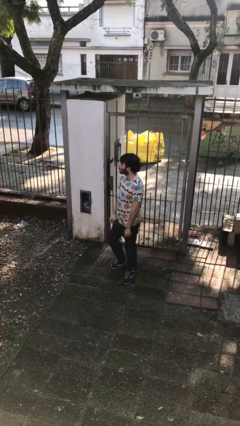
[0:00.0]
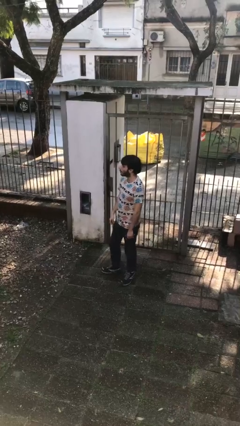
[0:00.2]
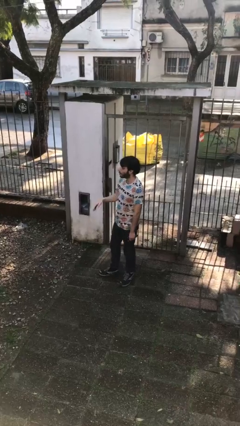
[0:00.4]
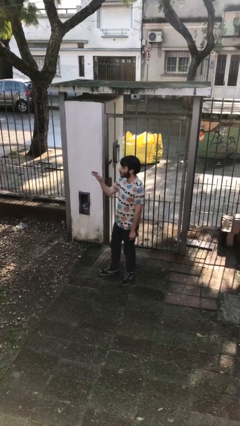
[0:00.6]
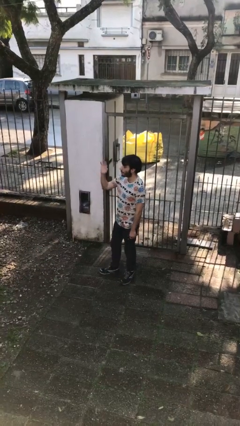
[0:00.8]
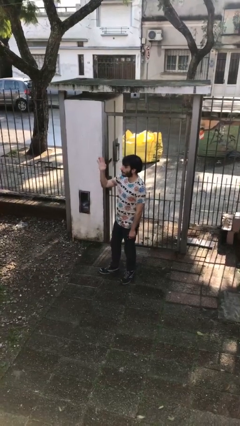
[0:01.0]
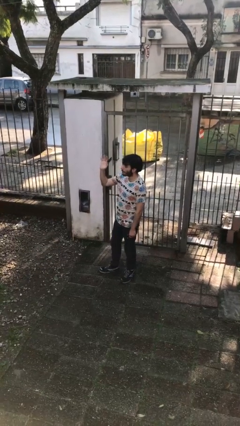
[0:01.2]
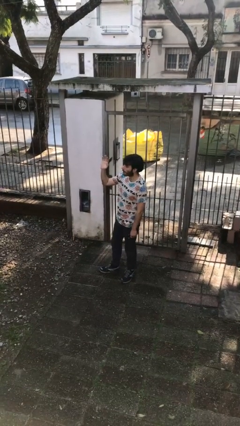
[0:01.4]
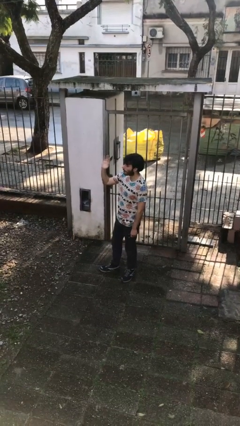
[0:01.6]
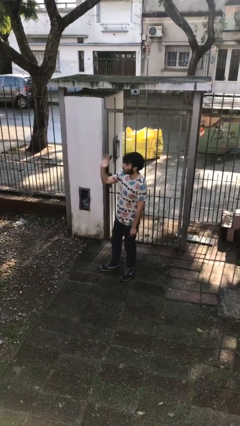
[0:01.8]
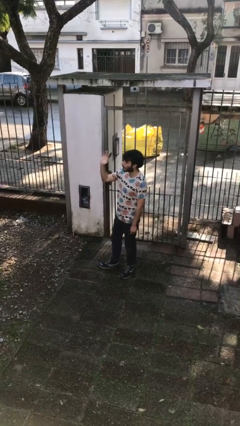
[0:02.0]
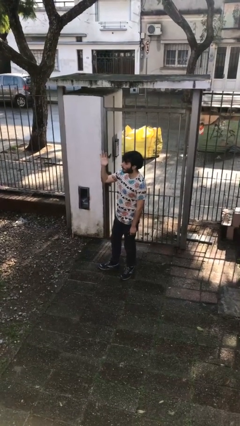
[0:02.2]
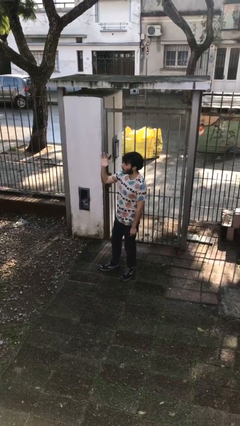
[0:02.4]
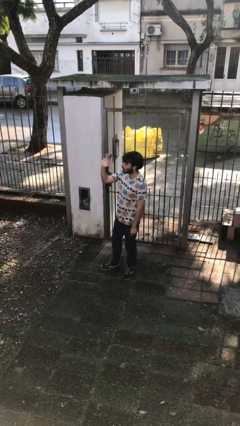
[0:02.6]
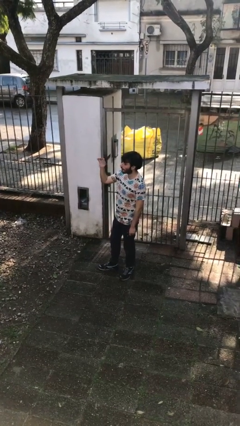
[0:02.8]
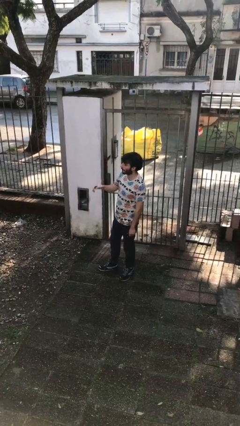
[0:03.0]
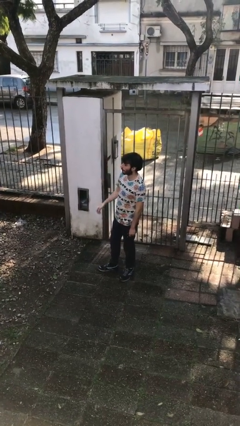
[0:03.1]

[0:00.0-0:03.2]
person waves at person

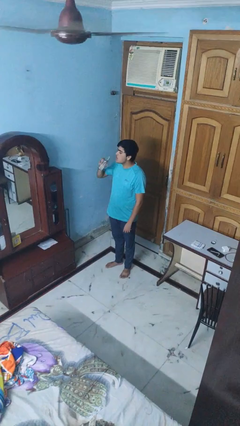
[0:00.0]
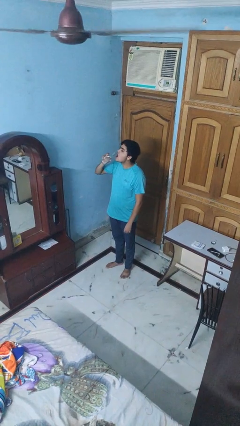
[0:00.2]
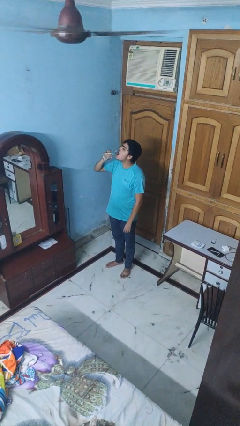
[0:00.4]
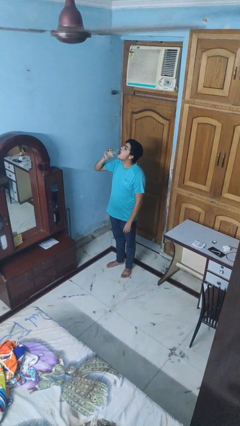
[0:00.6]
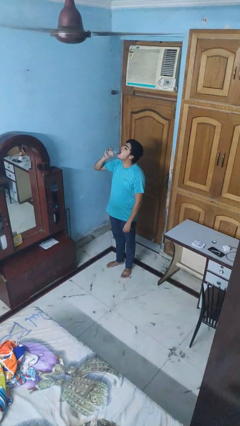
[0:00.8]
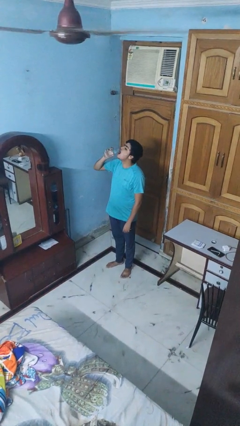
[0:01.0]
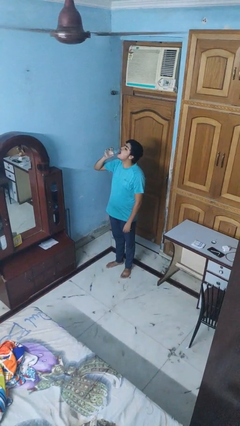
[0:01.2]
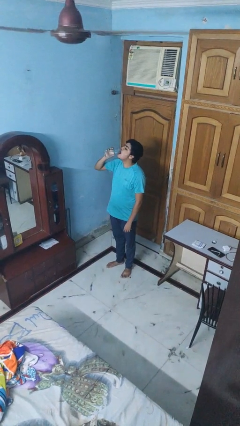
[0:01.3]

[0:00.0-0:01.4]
person drinks from bottle

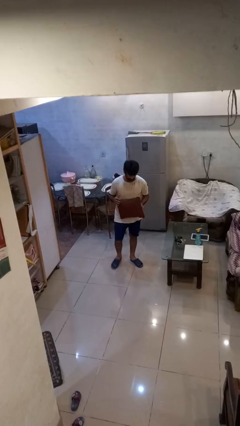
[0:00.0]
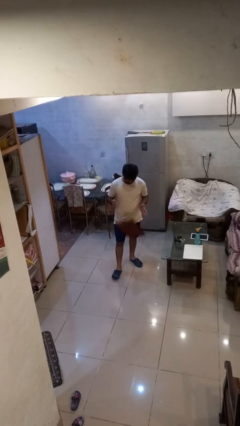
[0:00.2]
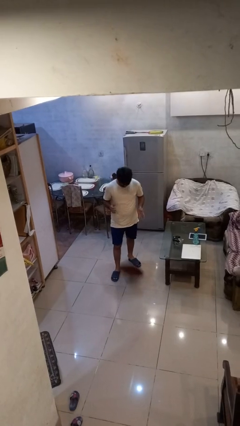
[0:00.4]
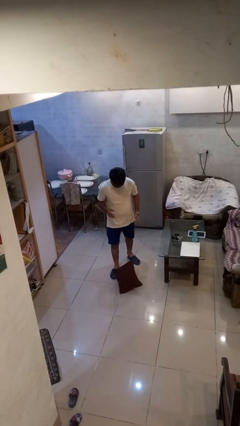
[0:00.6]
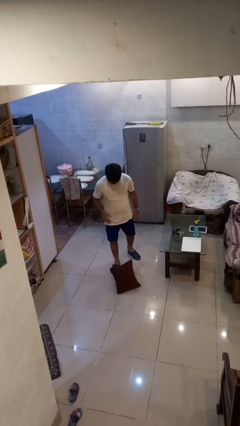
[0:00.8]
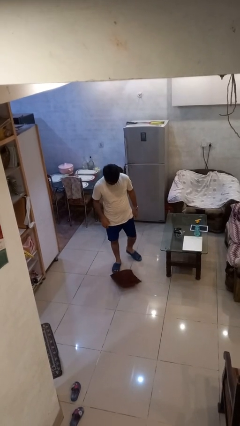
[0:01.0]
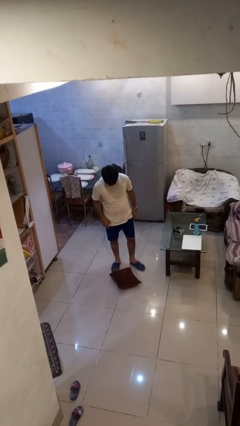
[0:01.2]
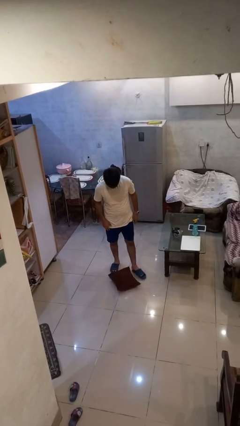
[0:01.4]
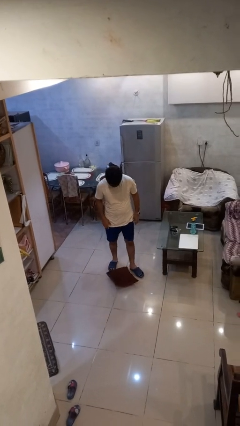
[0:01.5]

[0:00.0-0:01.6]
person drops object

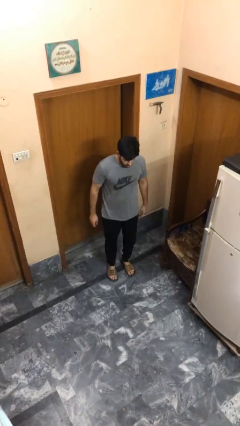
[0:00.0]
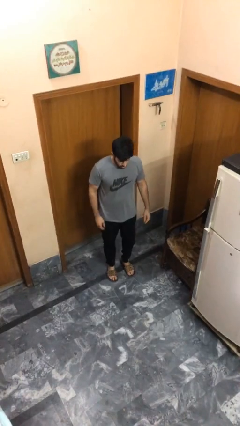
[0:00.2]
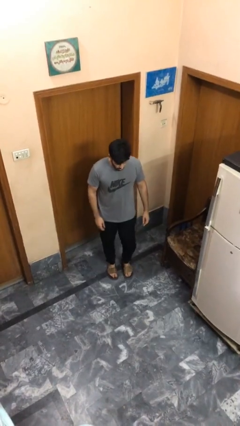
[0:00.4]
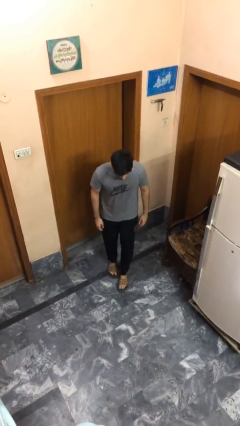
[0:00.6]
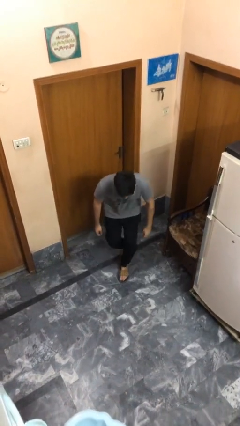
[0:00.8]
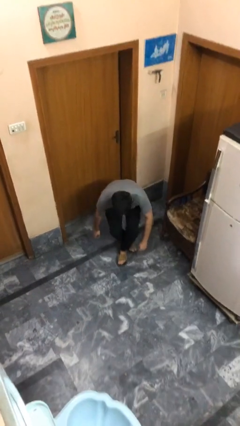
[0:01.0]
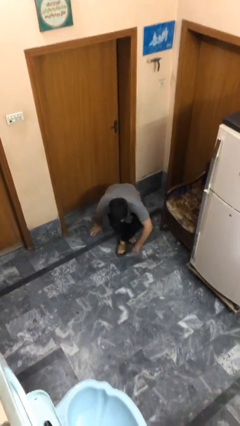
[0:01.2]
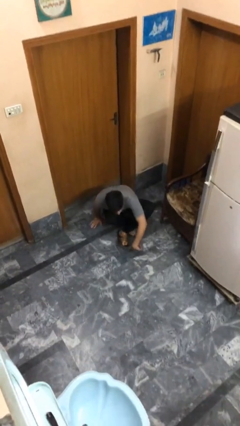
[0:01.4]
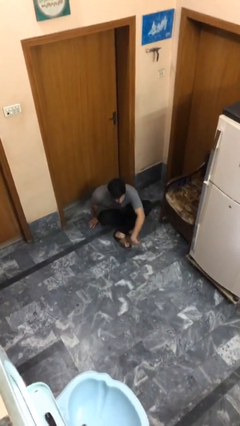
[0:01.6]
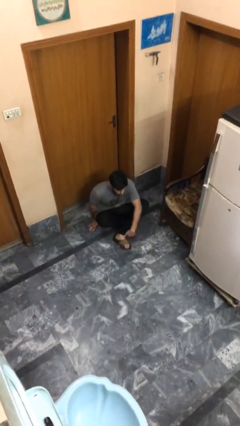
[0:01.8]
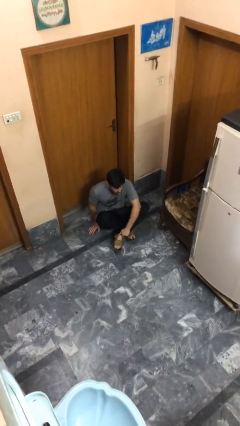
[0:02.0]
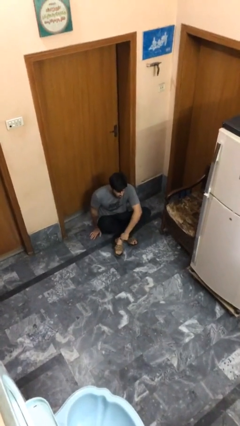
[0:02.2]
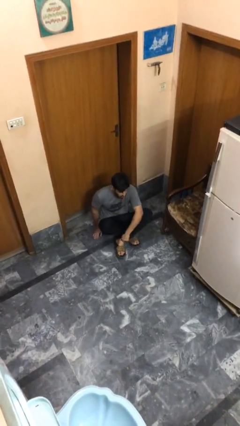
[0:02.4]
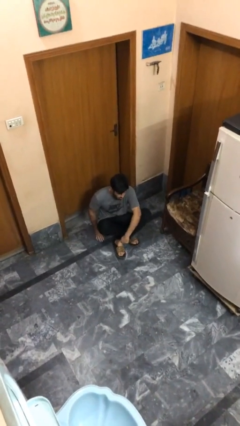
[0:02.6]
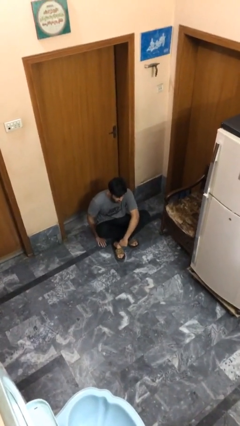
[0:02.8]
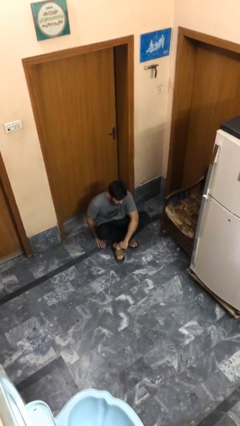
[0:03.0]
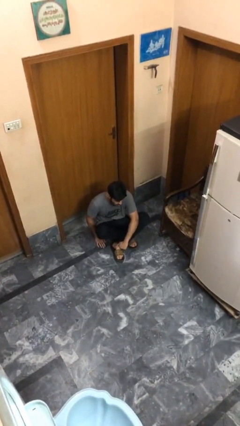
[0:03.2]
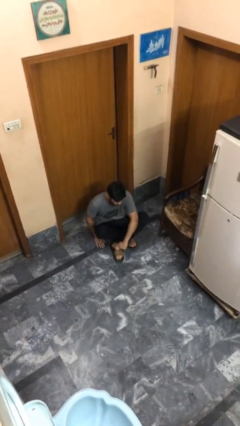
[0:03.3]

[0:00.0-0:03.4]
person sits crisscross

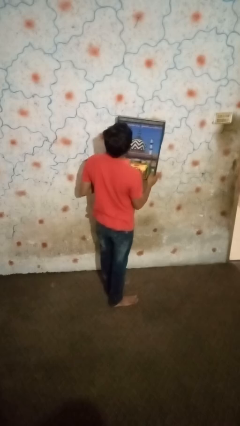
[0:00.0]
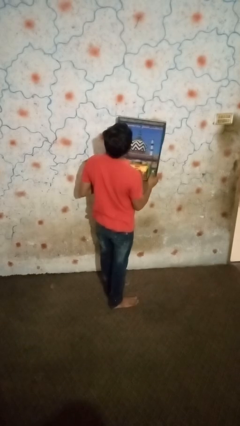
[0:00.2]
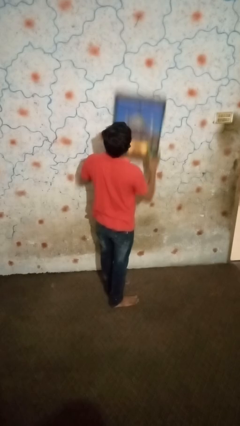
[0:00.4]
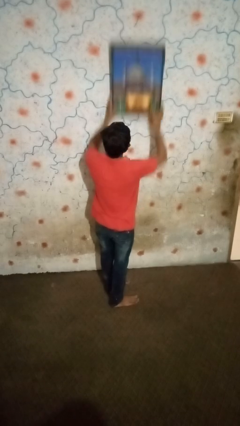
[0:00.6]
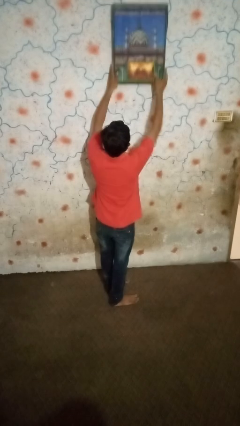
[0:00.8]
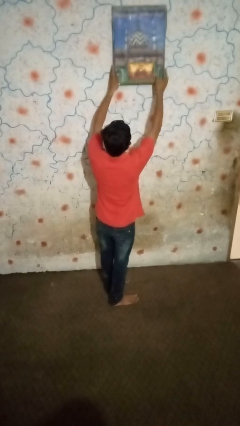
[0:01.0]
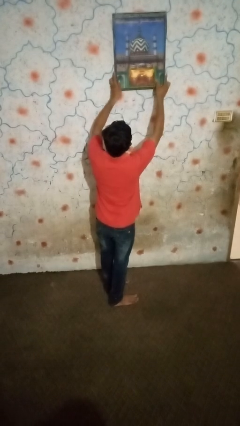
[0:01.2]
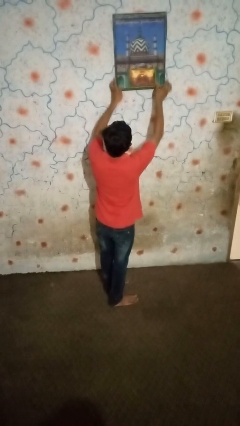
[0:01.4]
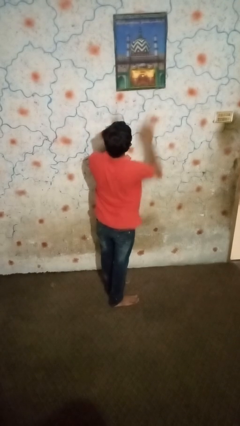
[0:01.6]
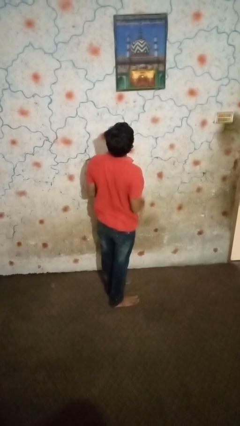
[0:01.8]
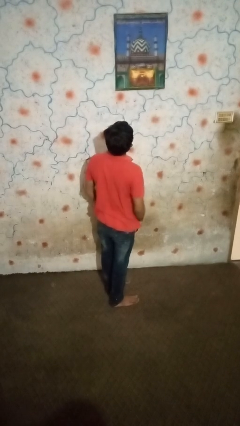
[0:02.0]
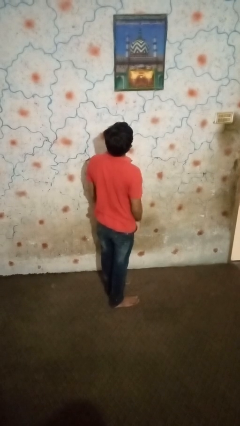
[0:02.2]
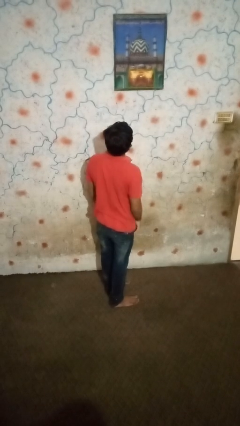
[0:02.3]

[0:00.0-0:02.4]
person puts up picture frame

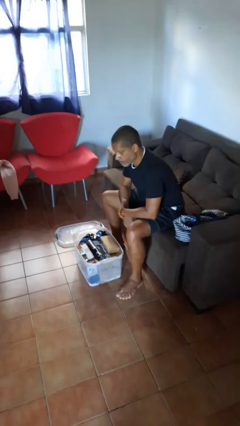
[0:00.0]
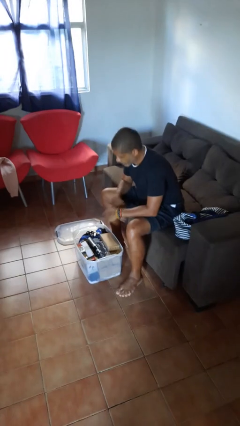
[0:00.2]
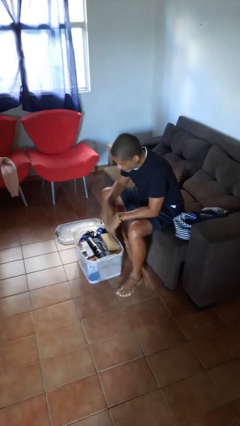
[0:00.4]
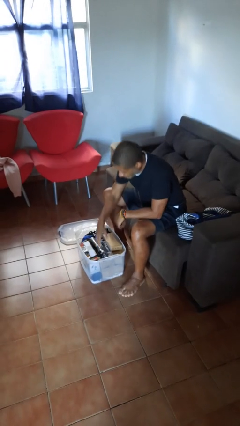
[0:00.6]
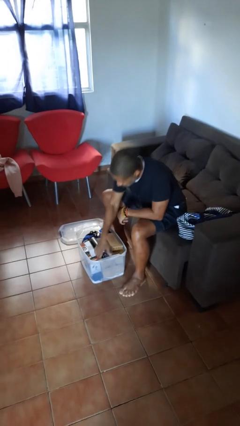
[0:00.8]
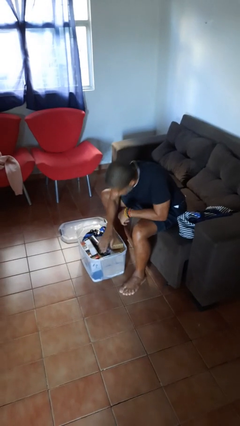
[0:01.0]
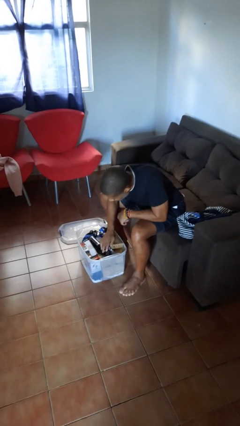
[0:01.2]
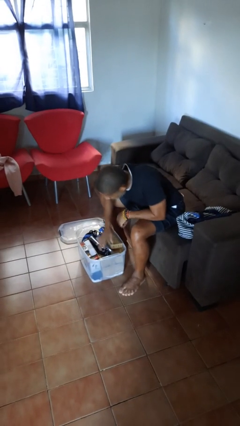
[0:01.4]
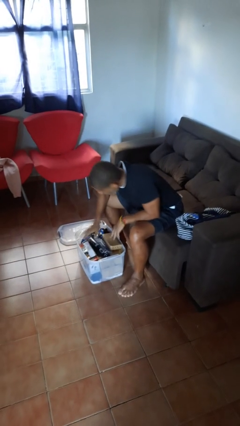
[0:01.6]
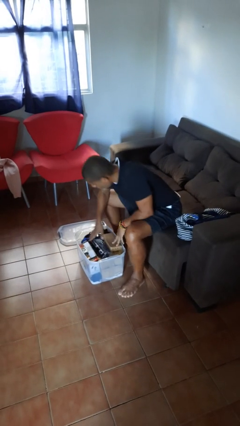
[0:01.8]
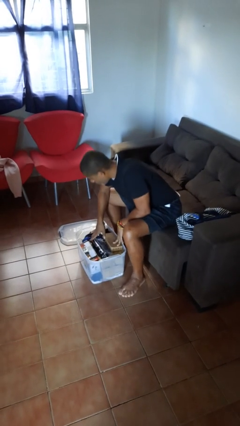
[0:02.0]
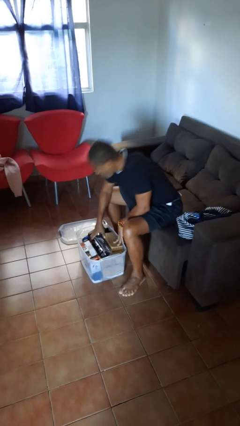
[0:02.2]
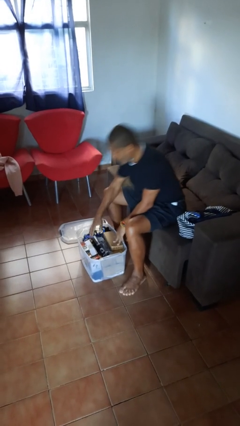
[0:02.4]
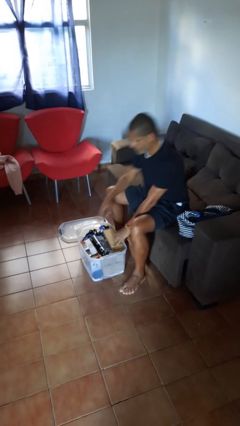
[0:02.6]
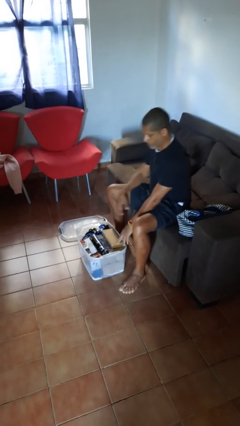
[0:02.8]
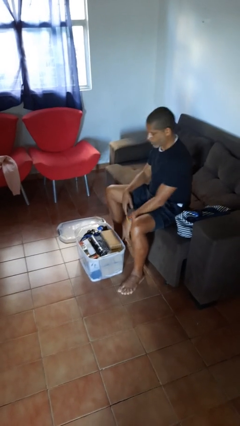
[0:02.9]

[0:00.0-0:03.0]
person searches in box

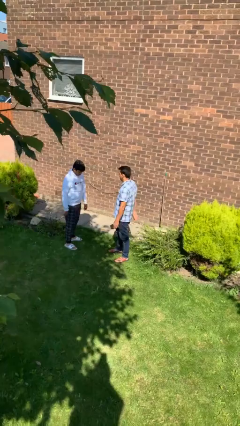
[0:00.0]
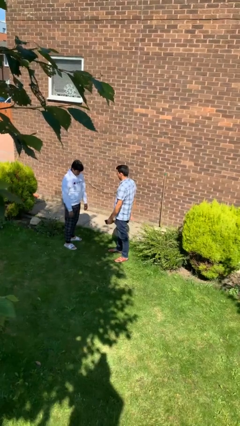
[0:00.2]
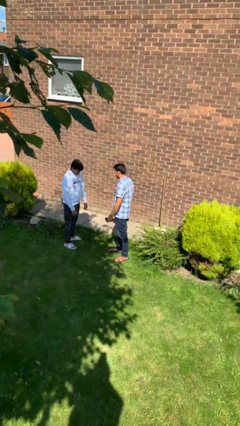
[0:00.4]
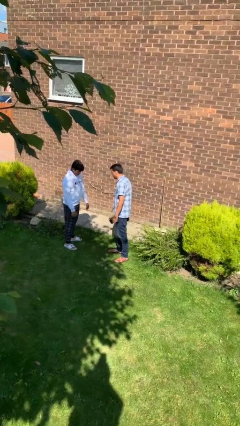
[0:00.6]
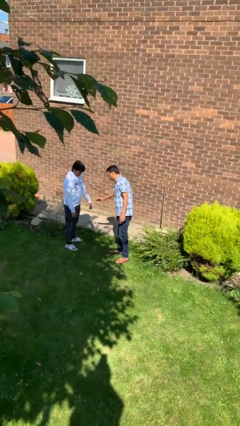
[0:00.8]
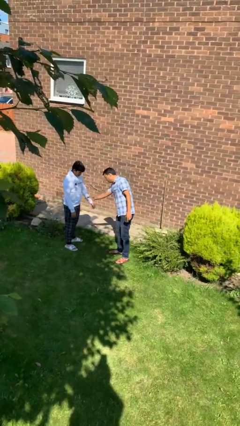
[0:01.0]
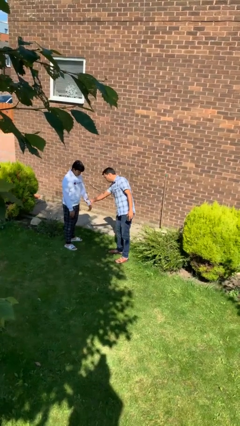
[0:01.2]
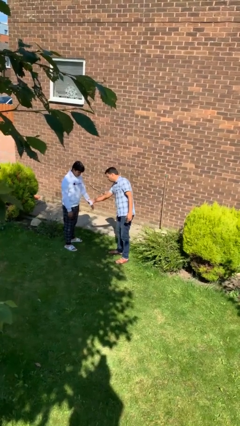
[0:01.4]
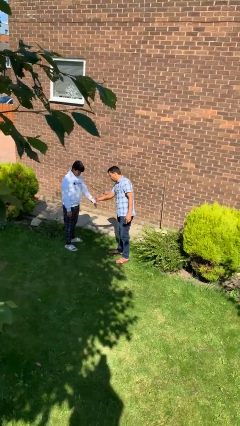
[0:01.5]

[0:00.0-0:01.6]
person grabs person by forearm

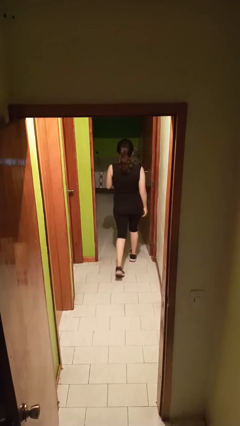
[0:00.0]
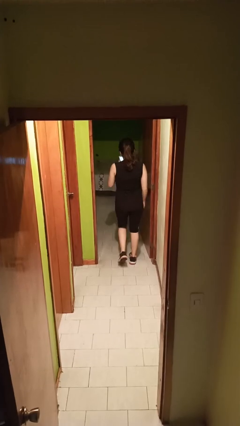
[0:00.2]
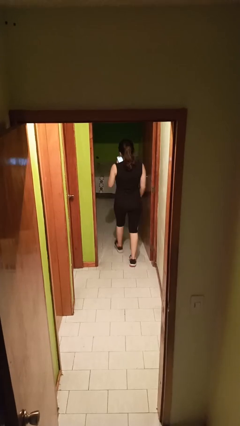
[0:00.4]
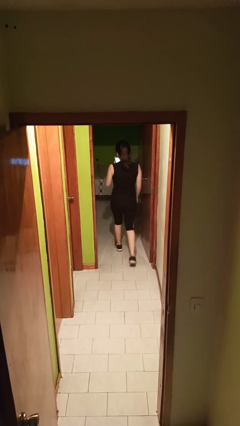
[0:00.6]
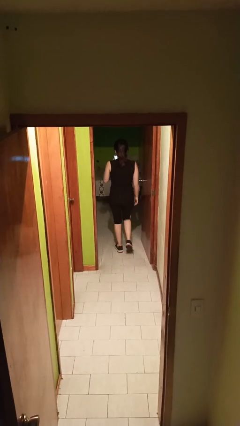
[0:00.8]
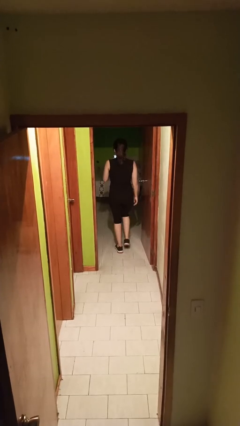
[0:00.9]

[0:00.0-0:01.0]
person exits scene through structure
